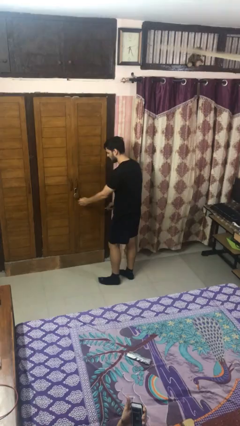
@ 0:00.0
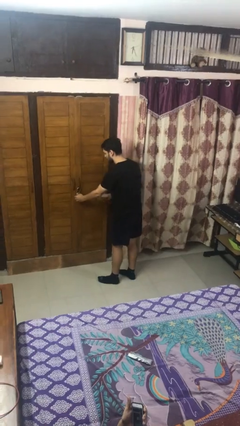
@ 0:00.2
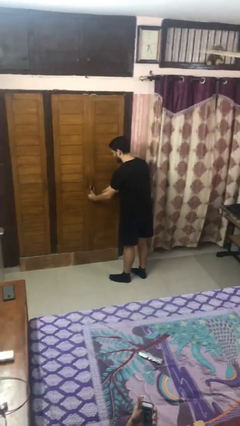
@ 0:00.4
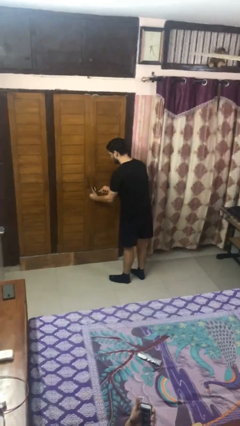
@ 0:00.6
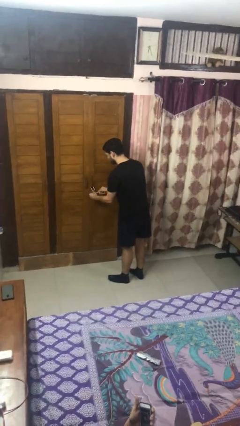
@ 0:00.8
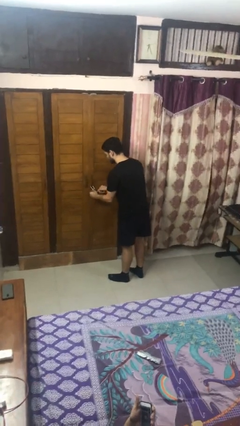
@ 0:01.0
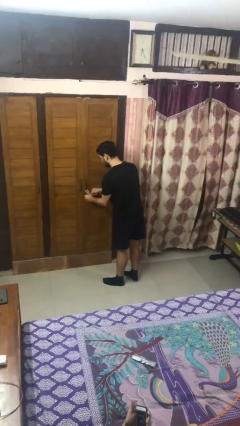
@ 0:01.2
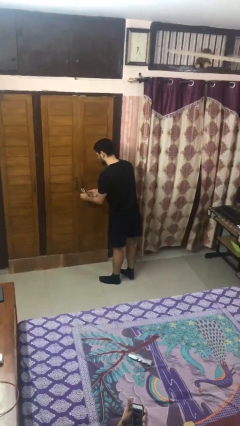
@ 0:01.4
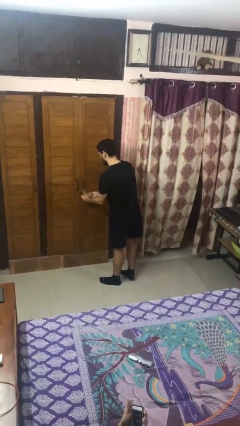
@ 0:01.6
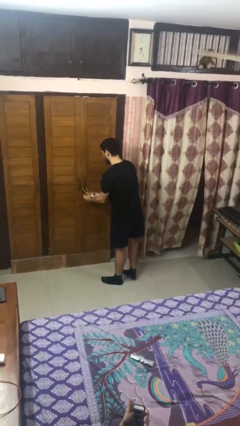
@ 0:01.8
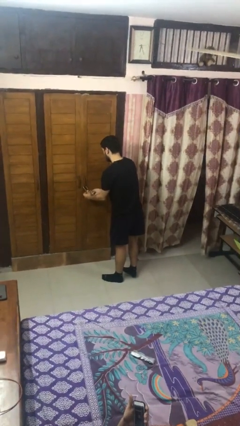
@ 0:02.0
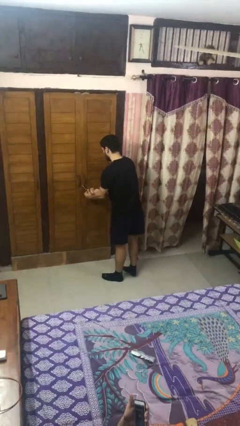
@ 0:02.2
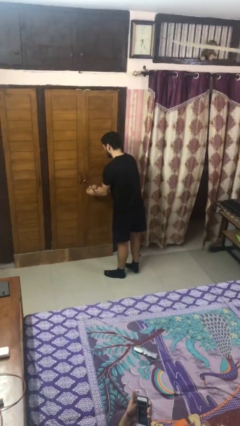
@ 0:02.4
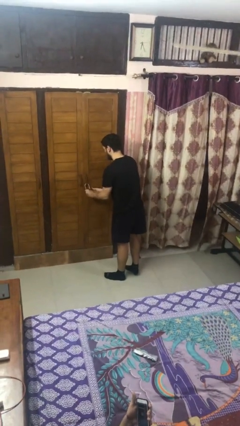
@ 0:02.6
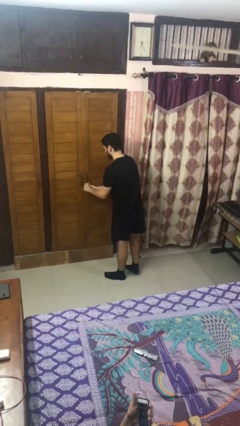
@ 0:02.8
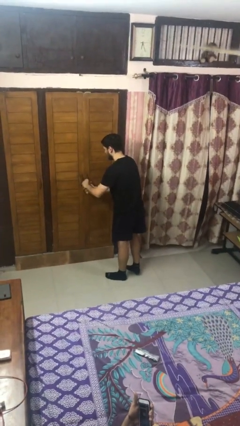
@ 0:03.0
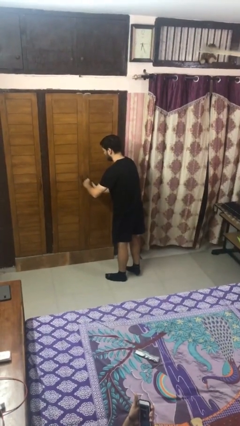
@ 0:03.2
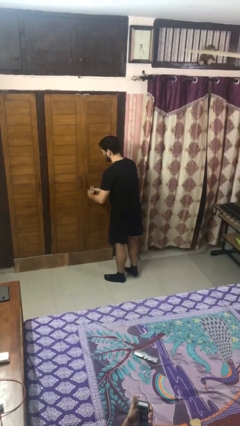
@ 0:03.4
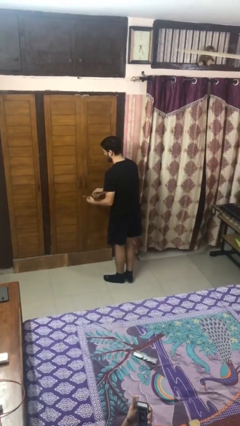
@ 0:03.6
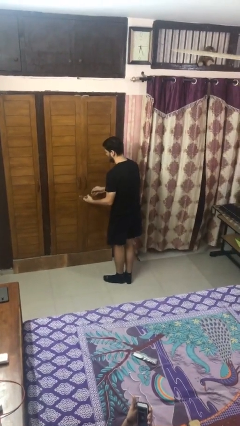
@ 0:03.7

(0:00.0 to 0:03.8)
person unlocks door with keys

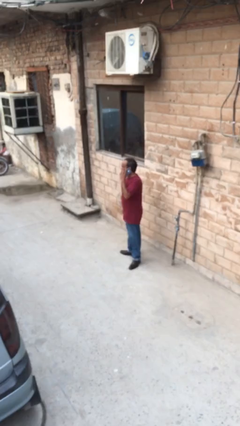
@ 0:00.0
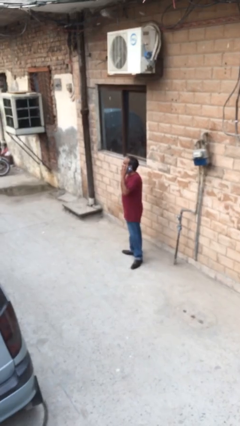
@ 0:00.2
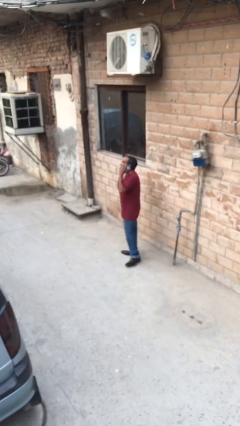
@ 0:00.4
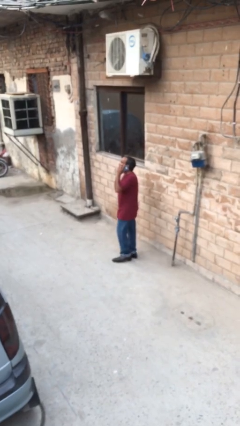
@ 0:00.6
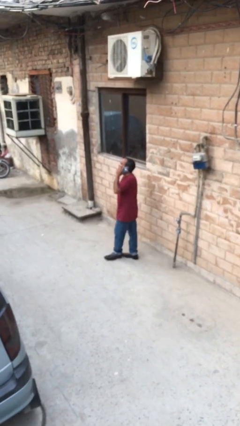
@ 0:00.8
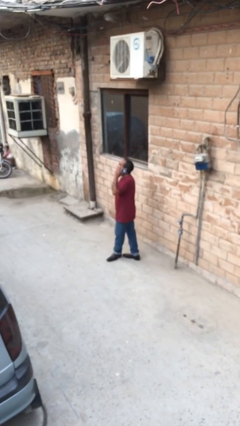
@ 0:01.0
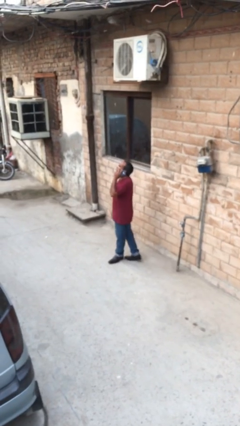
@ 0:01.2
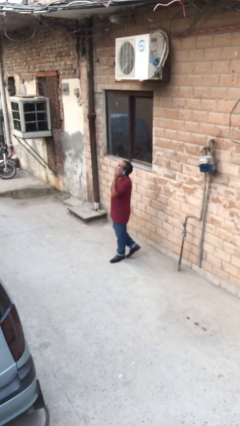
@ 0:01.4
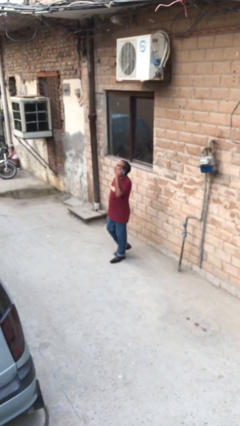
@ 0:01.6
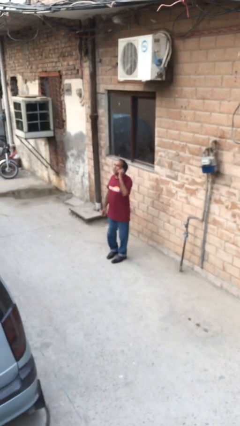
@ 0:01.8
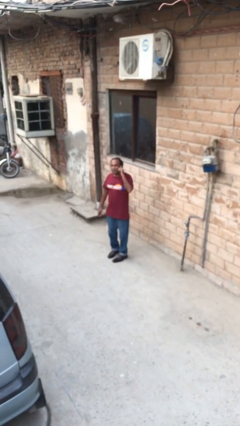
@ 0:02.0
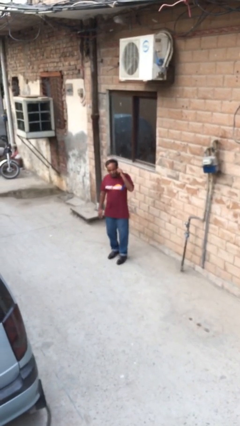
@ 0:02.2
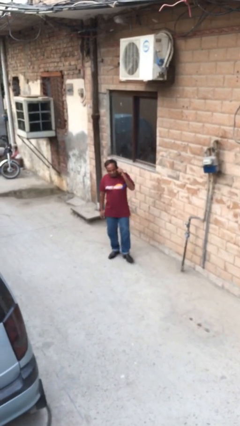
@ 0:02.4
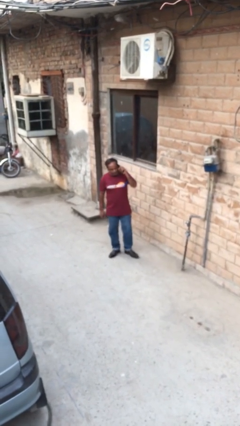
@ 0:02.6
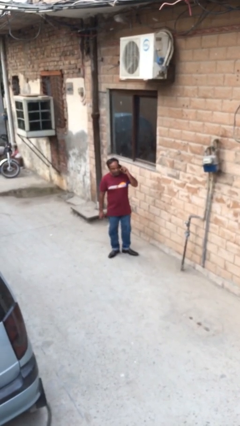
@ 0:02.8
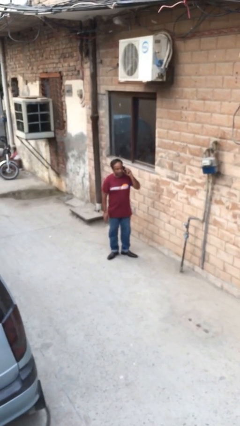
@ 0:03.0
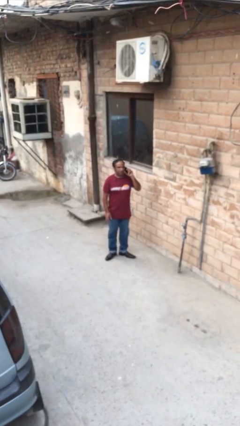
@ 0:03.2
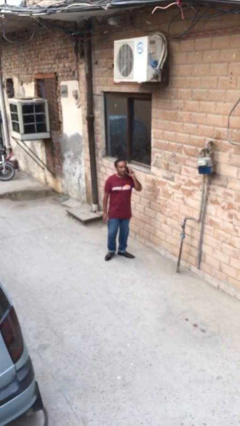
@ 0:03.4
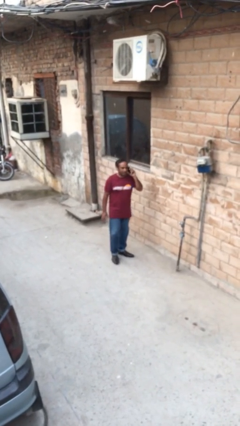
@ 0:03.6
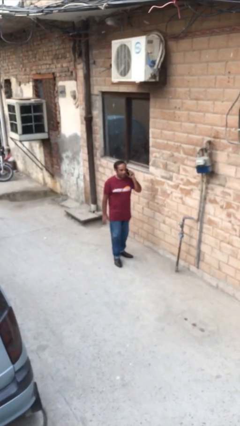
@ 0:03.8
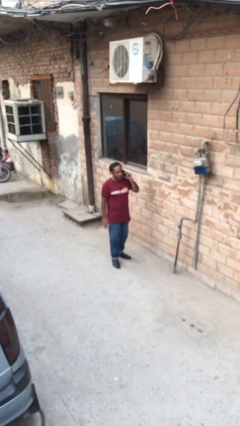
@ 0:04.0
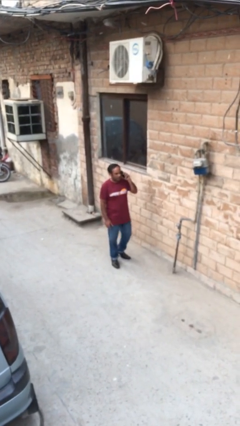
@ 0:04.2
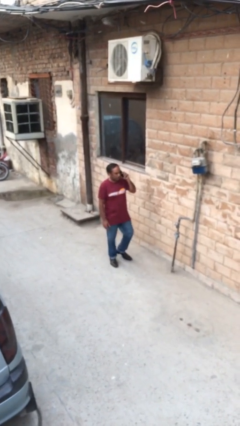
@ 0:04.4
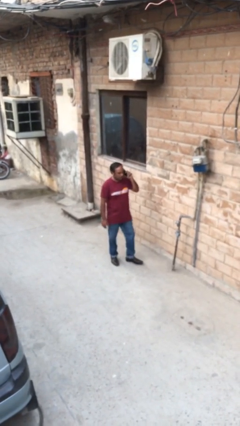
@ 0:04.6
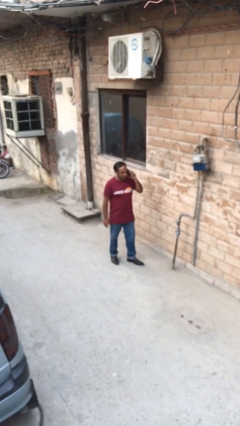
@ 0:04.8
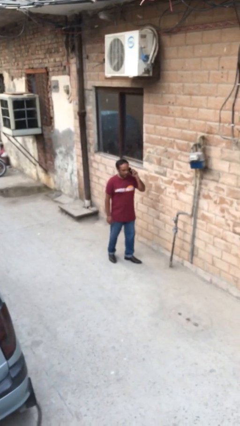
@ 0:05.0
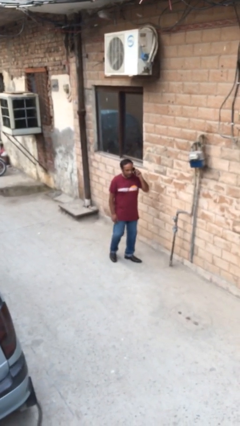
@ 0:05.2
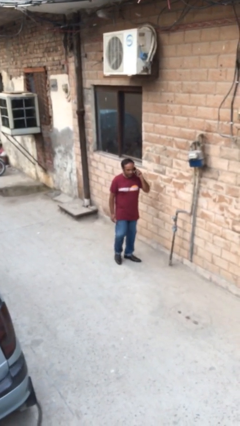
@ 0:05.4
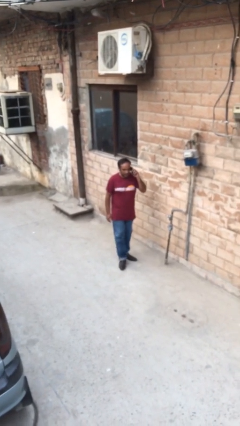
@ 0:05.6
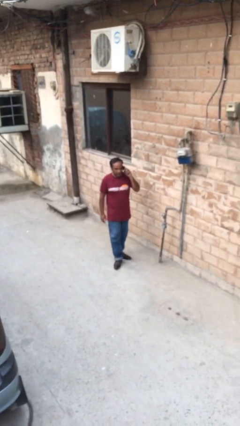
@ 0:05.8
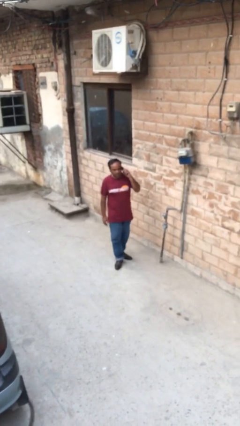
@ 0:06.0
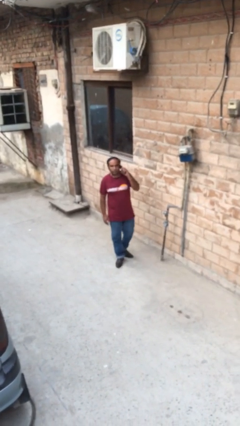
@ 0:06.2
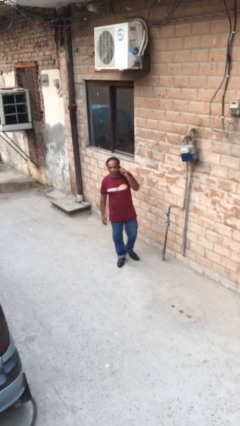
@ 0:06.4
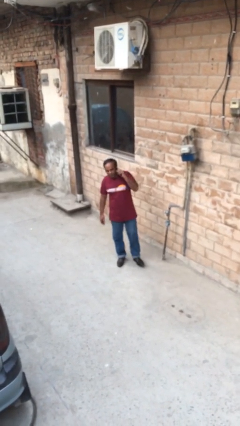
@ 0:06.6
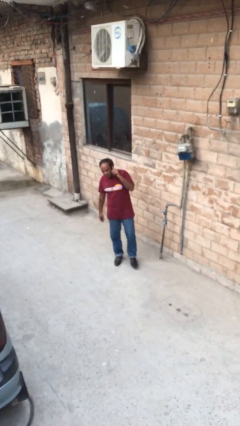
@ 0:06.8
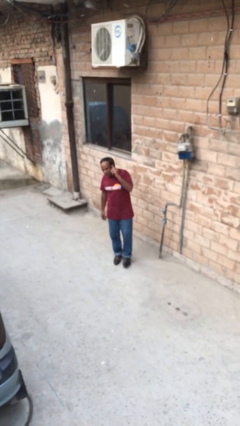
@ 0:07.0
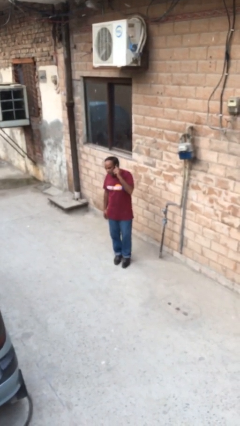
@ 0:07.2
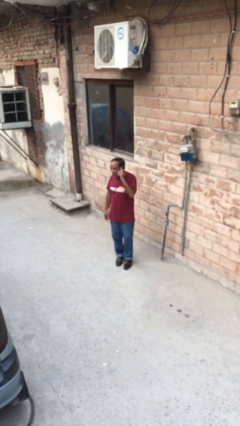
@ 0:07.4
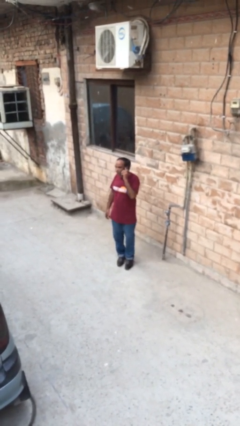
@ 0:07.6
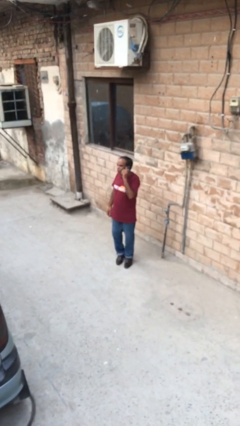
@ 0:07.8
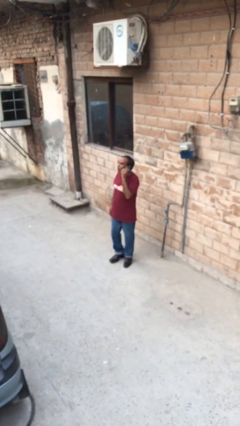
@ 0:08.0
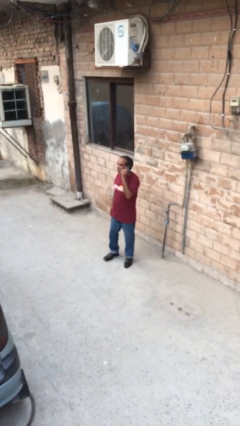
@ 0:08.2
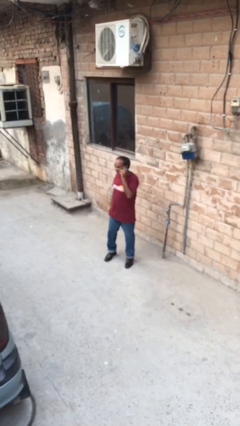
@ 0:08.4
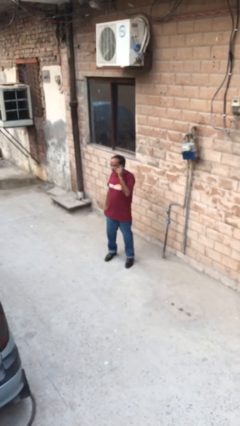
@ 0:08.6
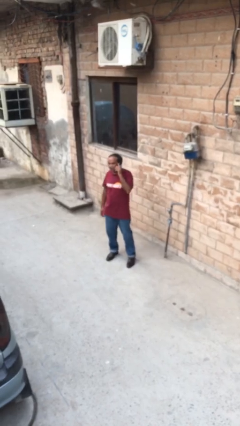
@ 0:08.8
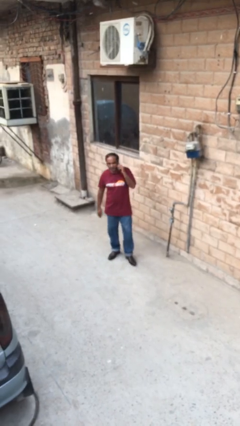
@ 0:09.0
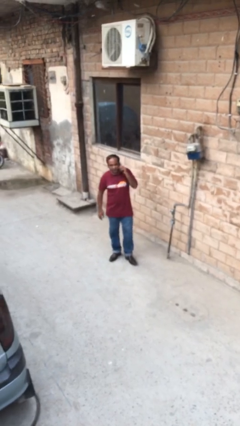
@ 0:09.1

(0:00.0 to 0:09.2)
person talks on phone

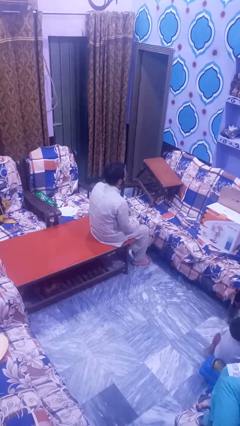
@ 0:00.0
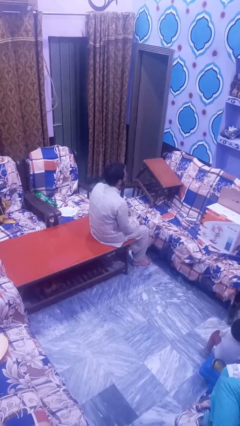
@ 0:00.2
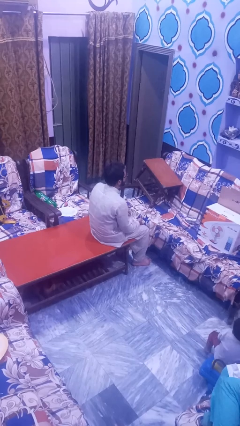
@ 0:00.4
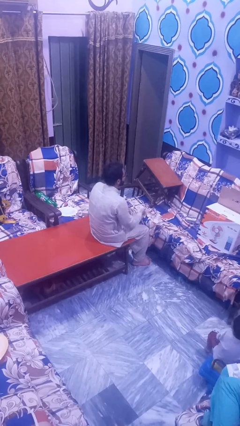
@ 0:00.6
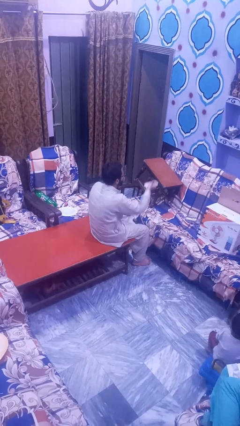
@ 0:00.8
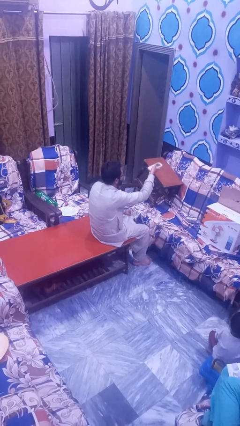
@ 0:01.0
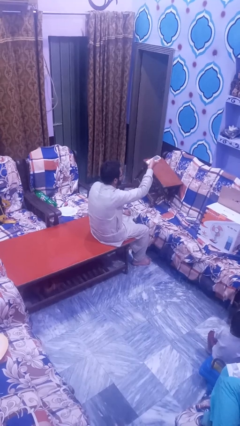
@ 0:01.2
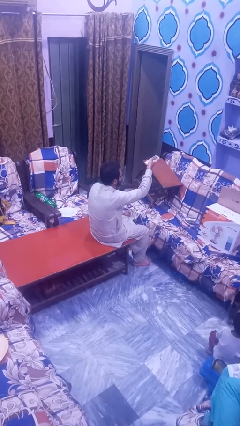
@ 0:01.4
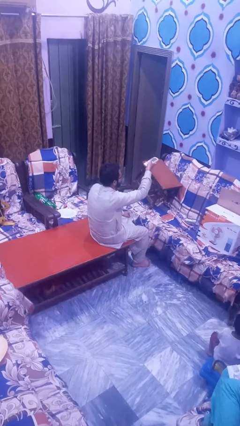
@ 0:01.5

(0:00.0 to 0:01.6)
person uses television remote

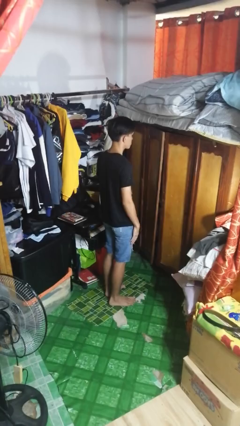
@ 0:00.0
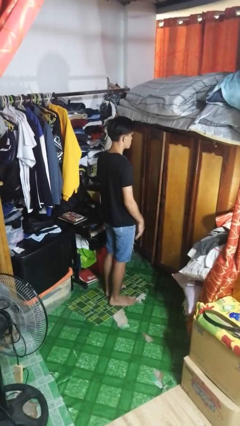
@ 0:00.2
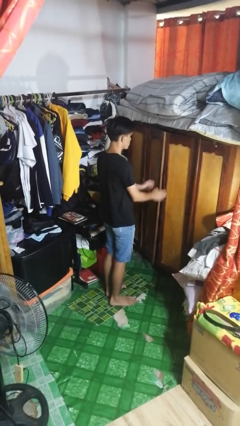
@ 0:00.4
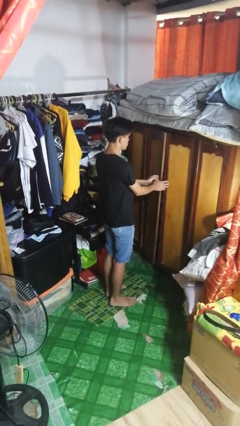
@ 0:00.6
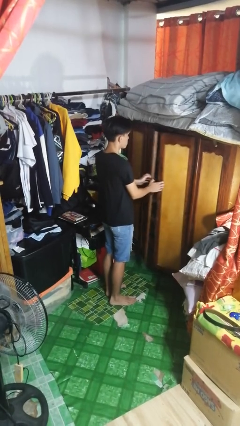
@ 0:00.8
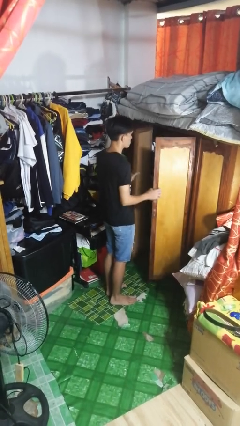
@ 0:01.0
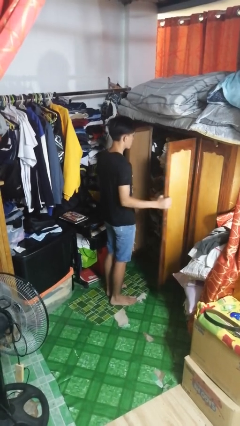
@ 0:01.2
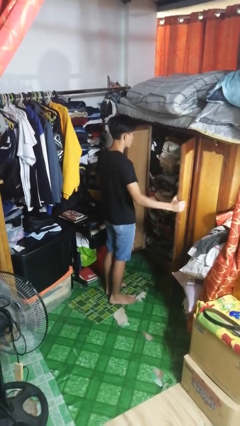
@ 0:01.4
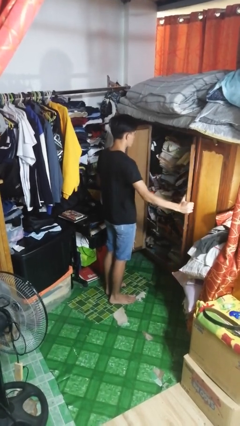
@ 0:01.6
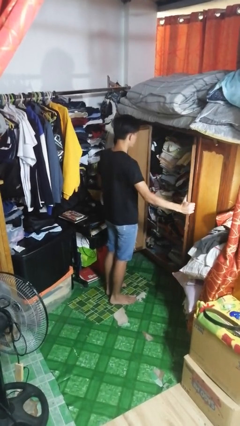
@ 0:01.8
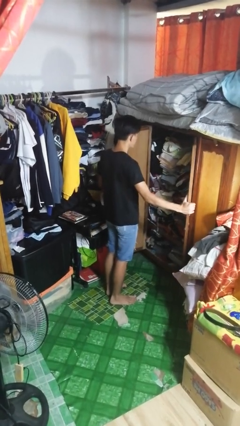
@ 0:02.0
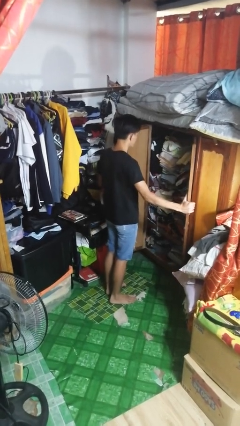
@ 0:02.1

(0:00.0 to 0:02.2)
person opens closet door

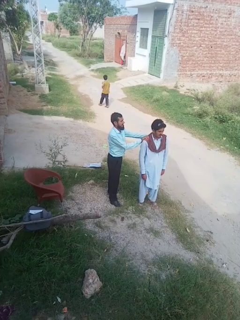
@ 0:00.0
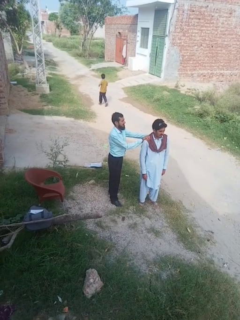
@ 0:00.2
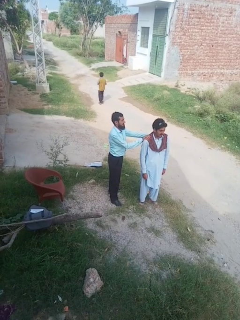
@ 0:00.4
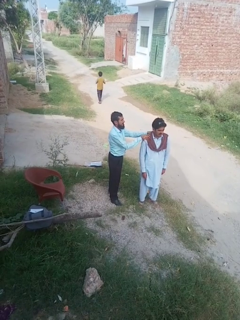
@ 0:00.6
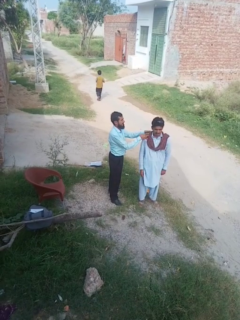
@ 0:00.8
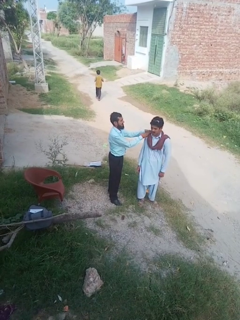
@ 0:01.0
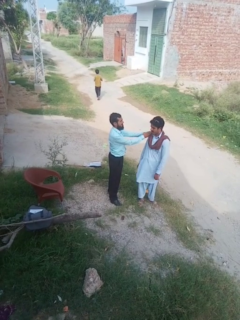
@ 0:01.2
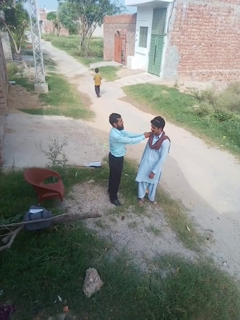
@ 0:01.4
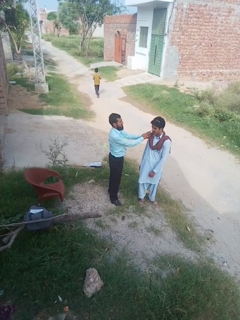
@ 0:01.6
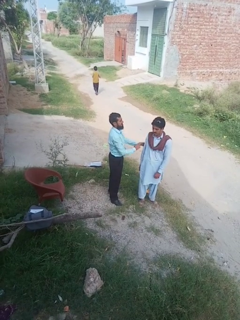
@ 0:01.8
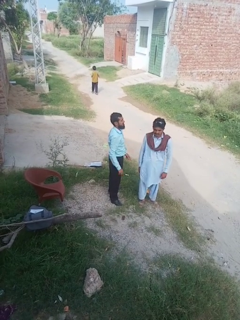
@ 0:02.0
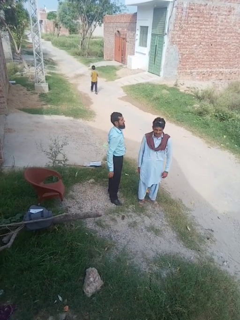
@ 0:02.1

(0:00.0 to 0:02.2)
person spins person around
